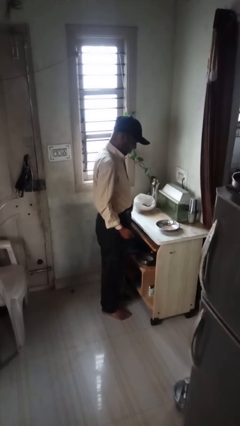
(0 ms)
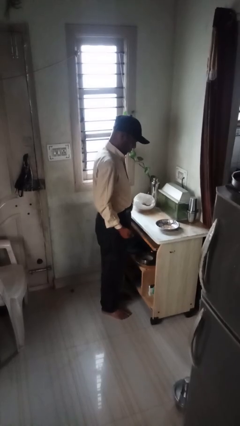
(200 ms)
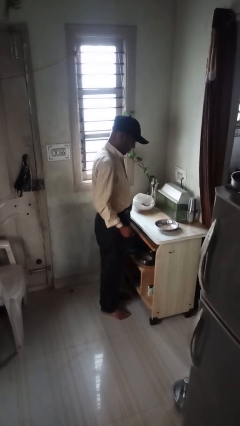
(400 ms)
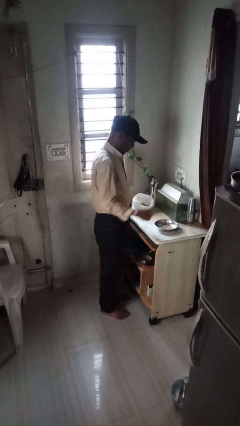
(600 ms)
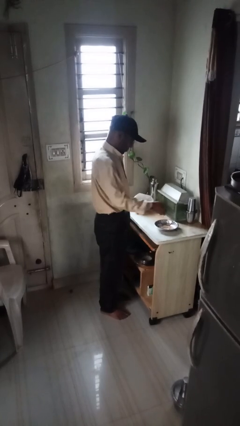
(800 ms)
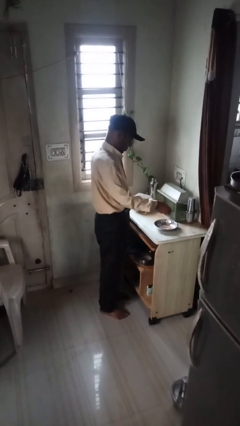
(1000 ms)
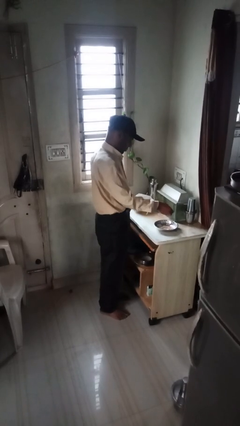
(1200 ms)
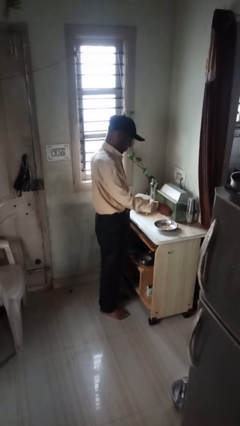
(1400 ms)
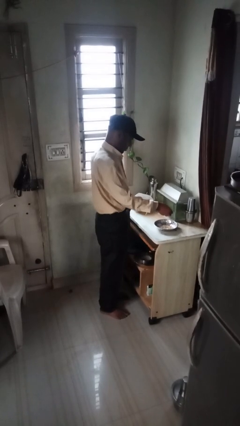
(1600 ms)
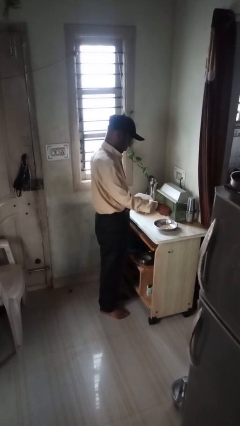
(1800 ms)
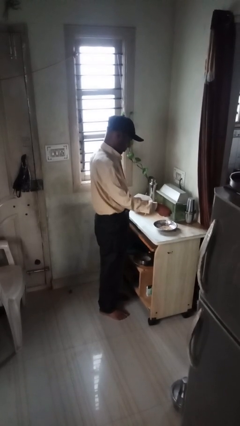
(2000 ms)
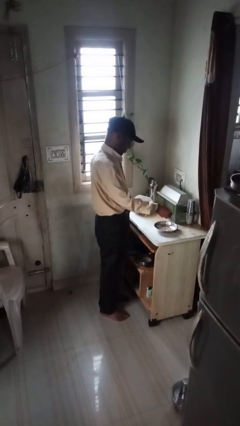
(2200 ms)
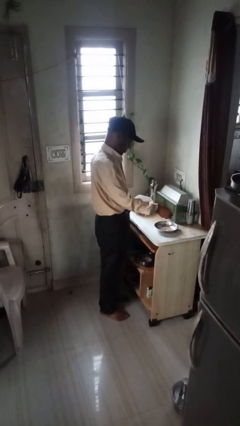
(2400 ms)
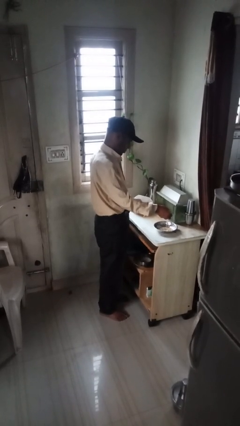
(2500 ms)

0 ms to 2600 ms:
person pours into bowl

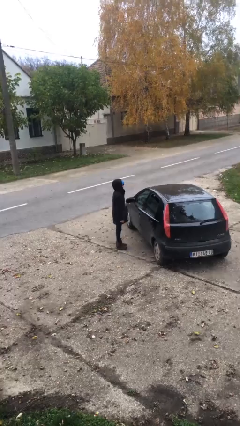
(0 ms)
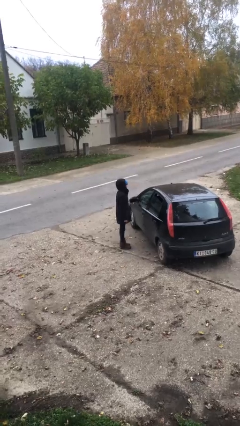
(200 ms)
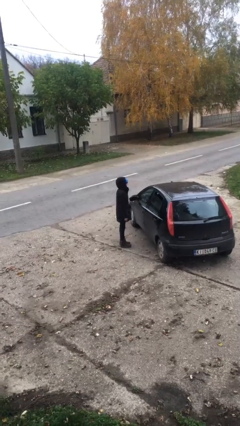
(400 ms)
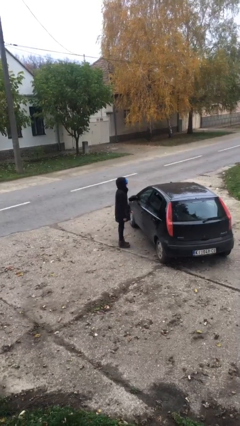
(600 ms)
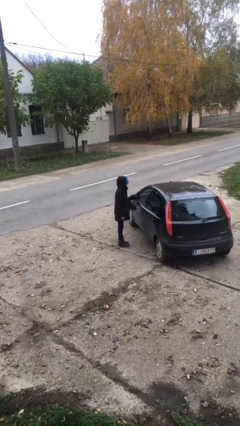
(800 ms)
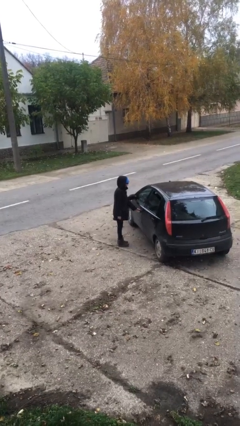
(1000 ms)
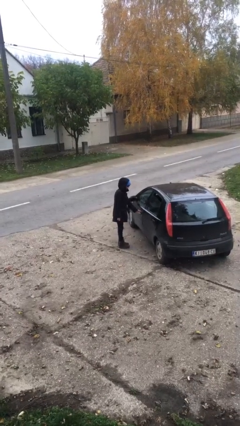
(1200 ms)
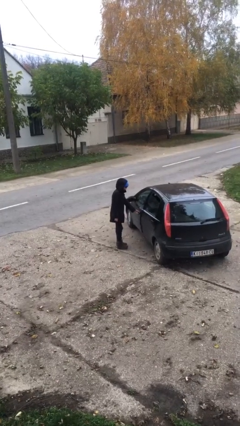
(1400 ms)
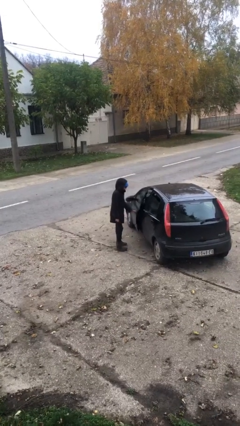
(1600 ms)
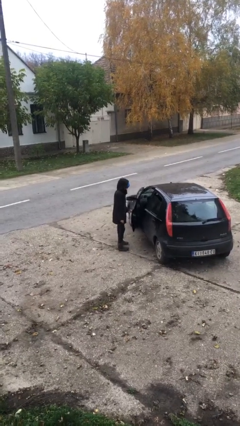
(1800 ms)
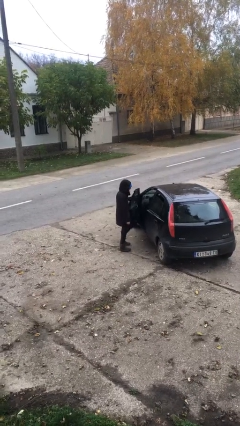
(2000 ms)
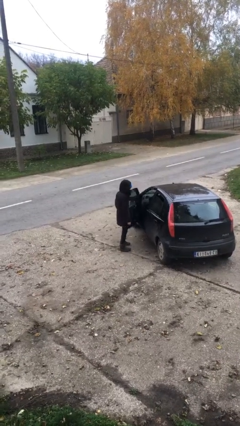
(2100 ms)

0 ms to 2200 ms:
person opens car door

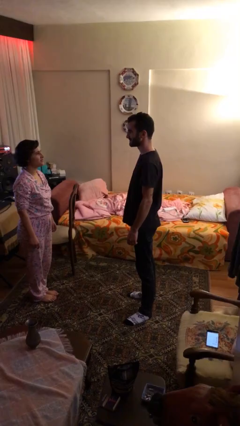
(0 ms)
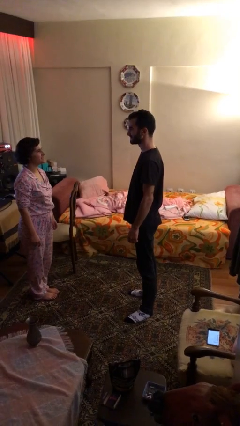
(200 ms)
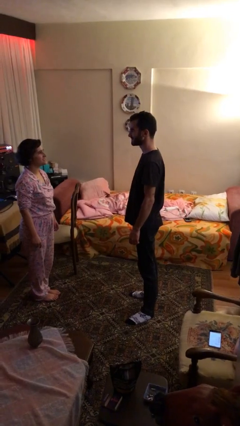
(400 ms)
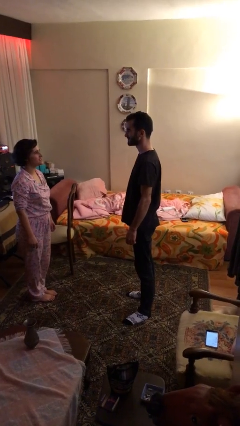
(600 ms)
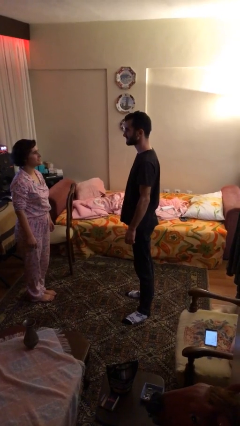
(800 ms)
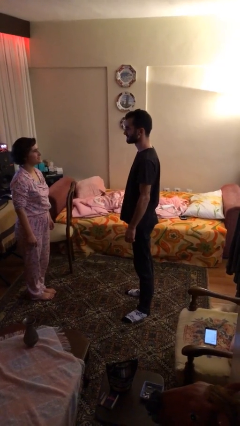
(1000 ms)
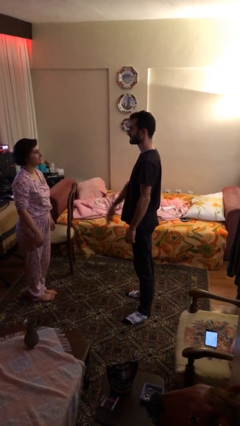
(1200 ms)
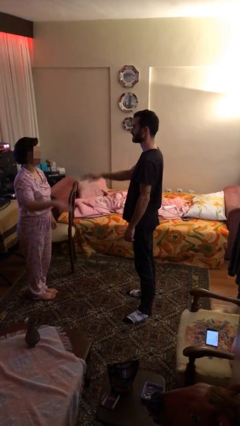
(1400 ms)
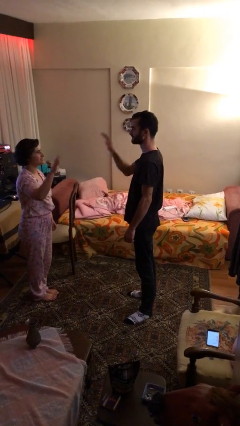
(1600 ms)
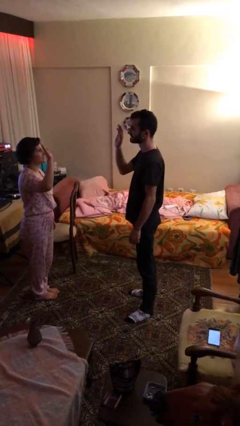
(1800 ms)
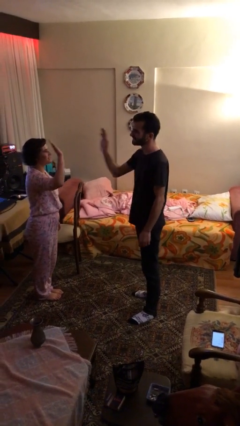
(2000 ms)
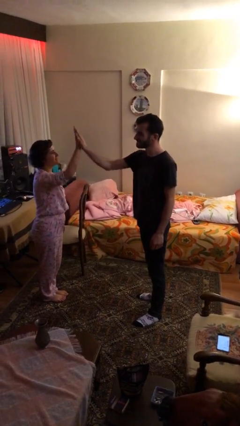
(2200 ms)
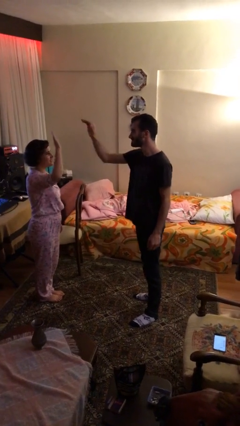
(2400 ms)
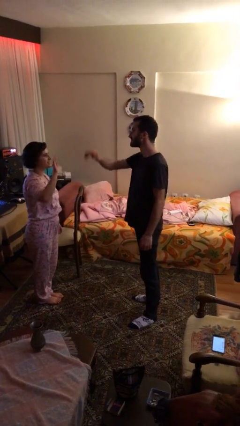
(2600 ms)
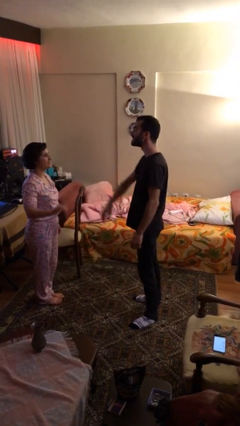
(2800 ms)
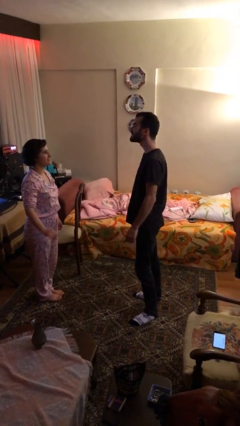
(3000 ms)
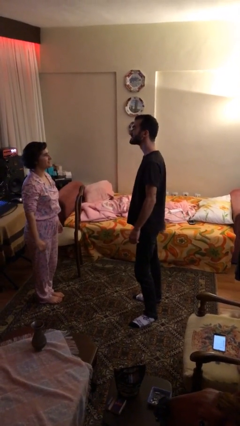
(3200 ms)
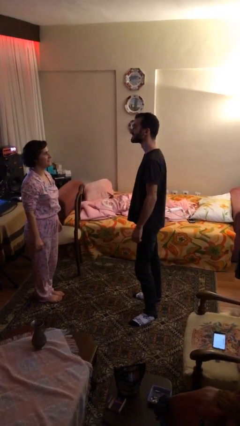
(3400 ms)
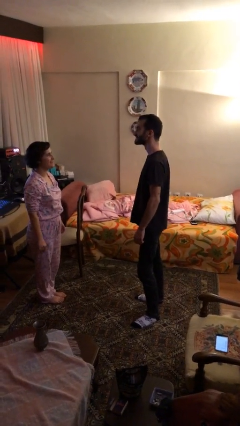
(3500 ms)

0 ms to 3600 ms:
person highfives hand

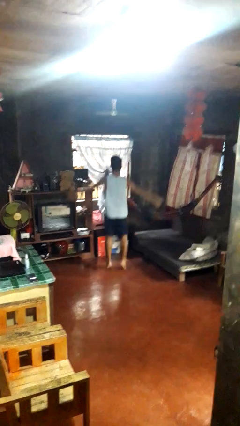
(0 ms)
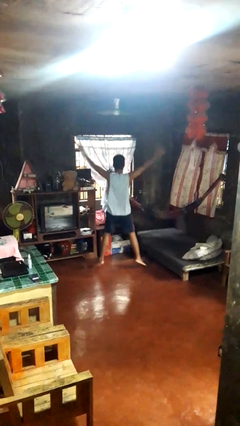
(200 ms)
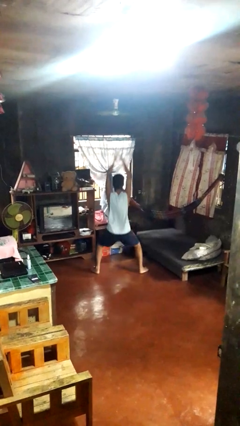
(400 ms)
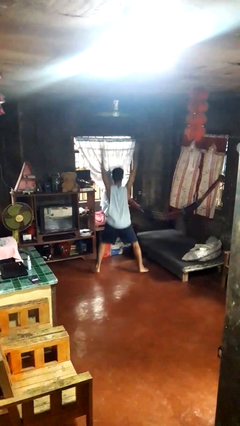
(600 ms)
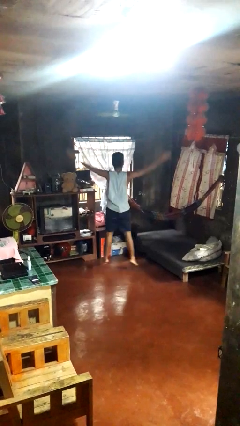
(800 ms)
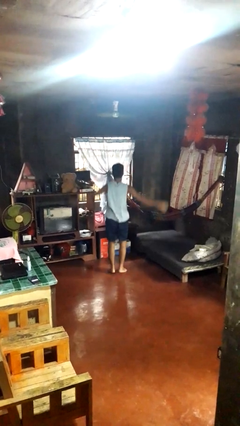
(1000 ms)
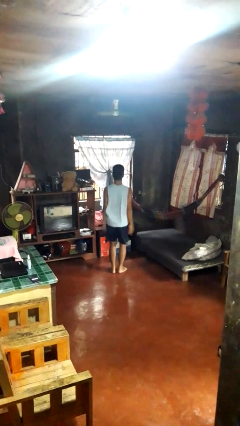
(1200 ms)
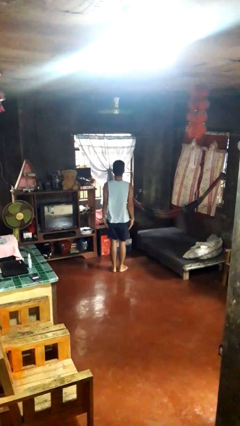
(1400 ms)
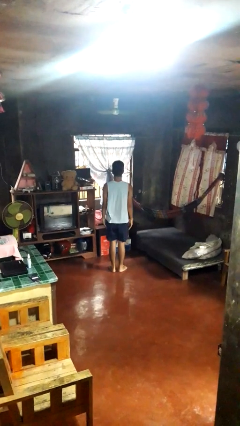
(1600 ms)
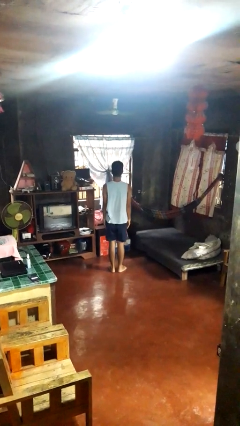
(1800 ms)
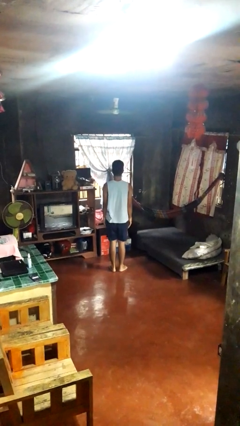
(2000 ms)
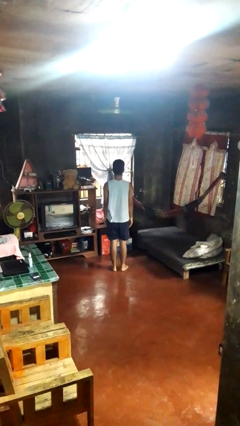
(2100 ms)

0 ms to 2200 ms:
person exercises with jumping jacks

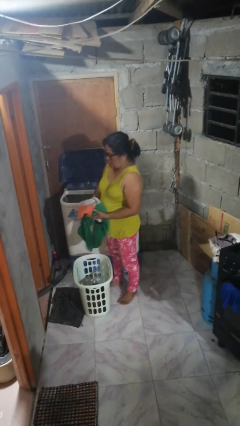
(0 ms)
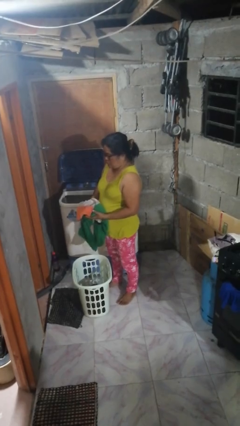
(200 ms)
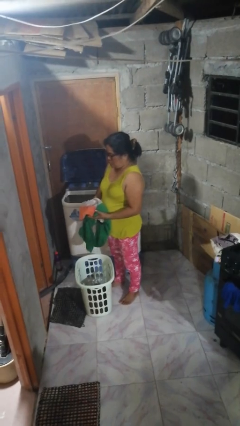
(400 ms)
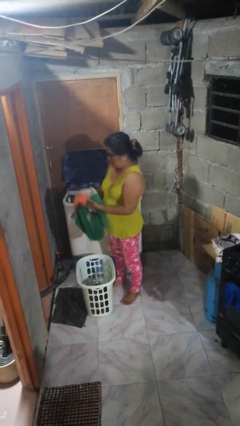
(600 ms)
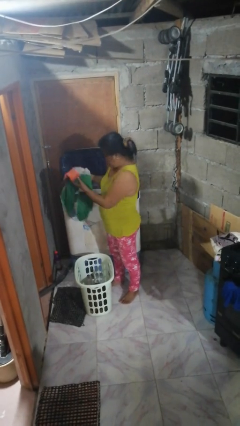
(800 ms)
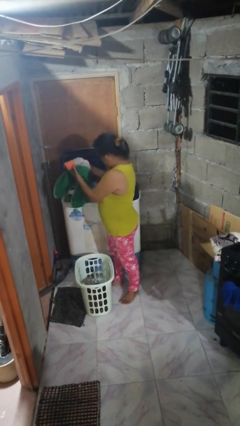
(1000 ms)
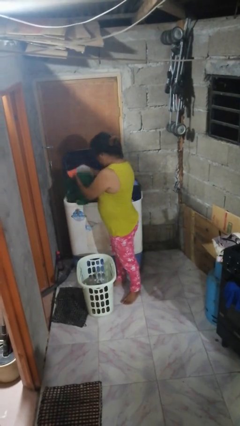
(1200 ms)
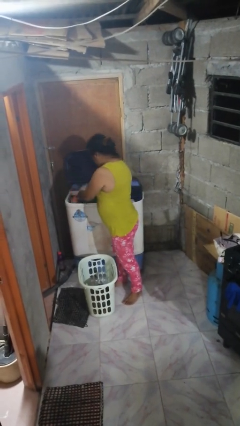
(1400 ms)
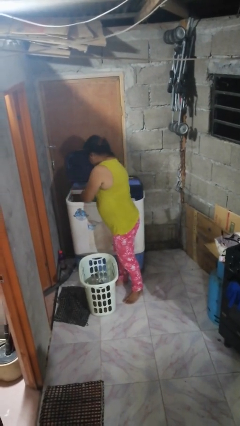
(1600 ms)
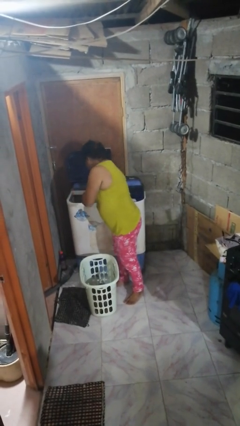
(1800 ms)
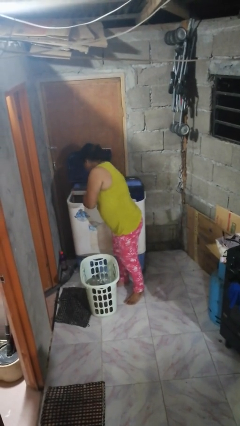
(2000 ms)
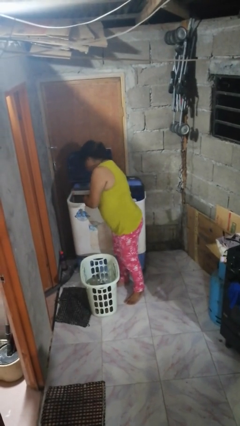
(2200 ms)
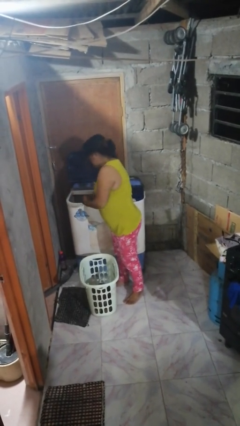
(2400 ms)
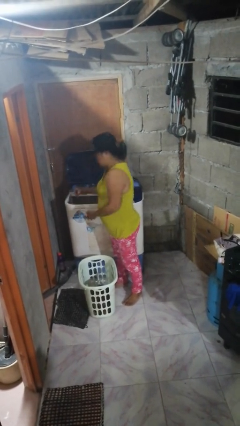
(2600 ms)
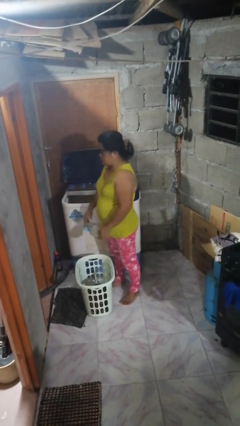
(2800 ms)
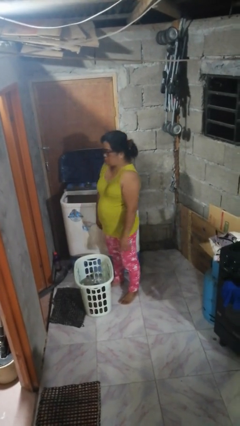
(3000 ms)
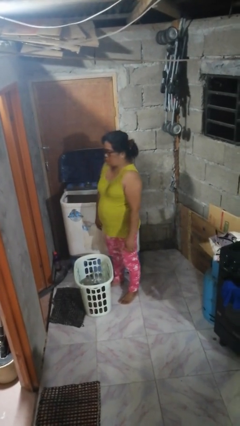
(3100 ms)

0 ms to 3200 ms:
person loads clotheswasher

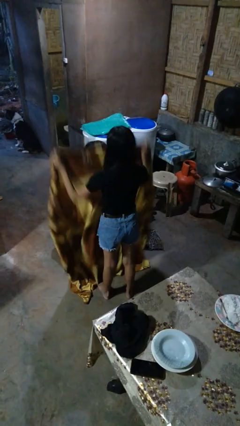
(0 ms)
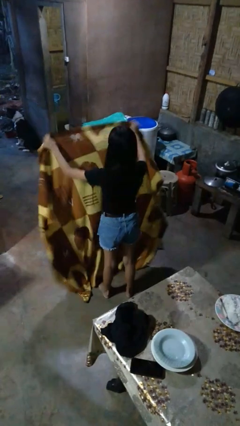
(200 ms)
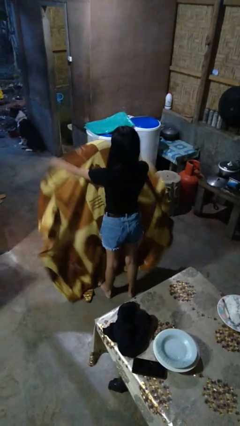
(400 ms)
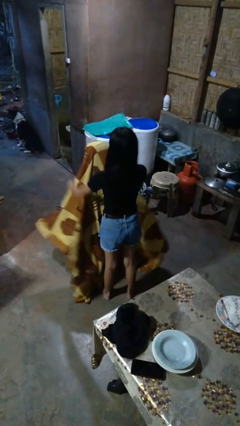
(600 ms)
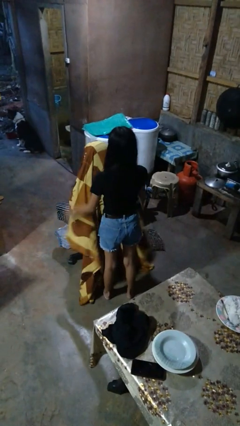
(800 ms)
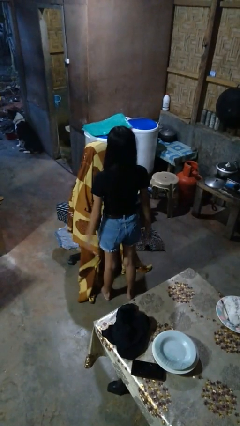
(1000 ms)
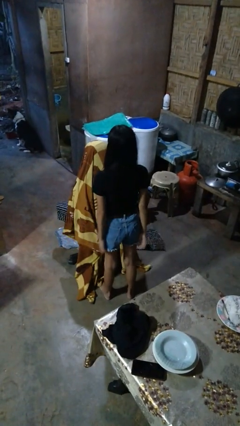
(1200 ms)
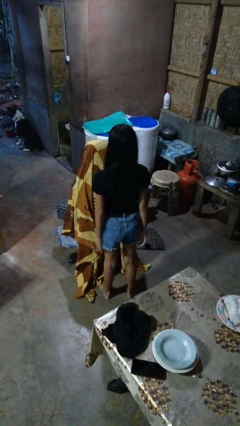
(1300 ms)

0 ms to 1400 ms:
person covers friend with blanket

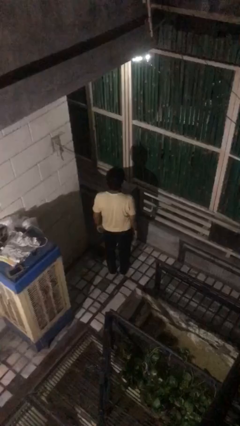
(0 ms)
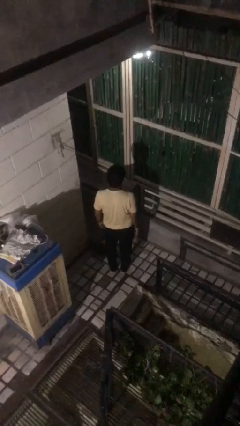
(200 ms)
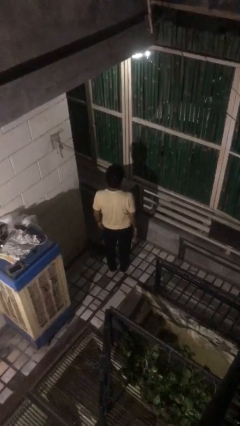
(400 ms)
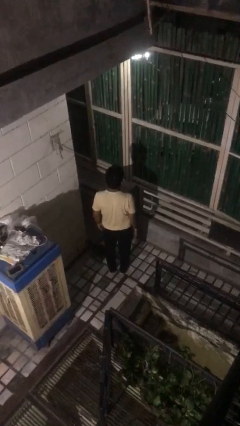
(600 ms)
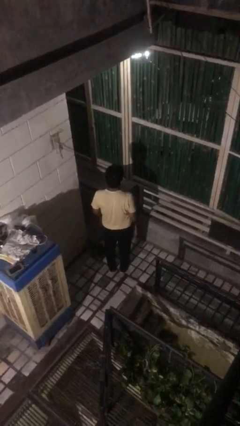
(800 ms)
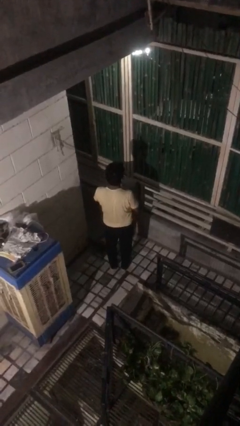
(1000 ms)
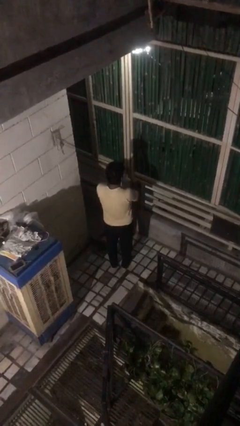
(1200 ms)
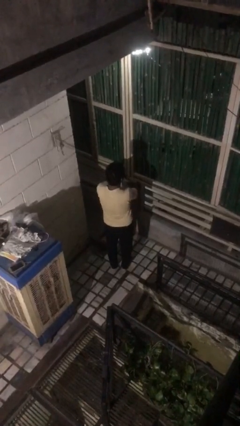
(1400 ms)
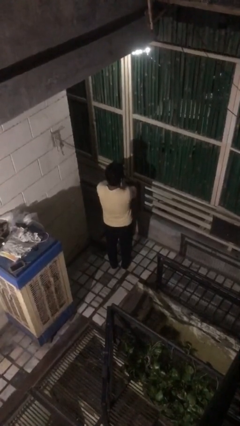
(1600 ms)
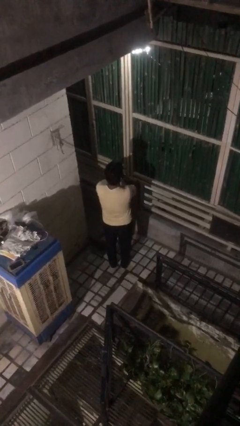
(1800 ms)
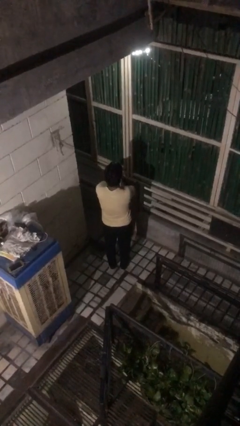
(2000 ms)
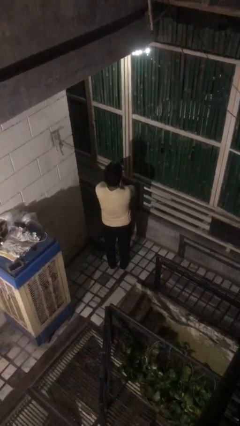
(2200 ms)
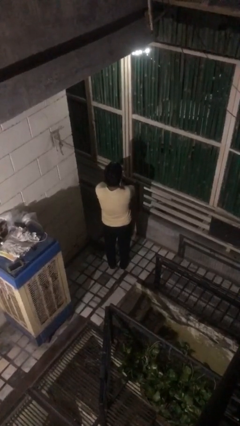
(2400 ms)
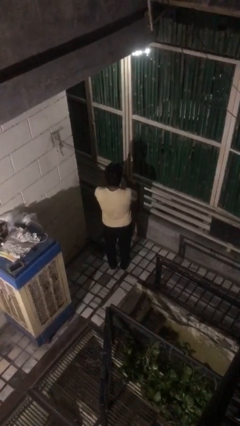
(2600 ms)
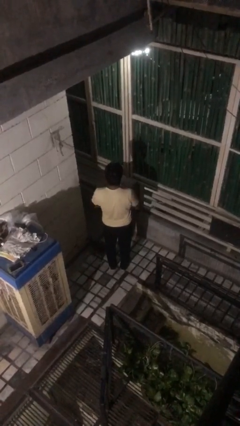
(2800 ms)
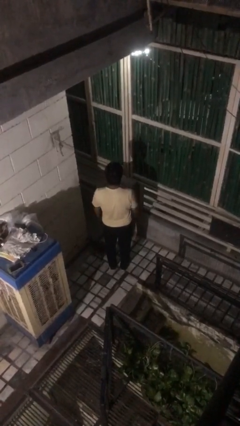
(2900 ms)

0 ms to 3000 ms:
person covers face with hands
